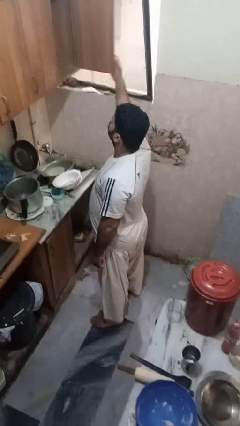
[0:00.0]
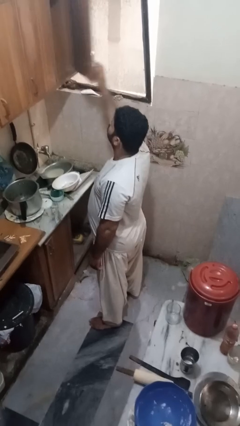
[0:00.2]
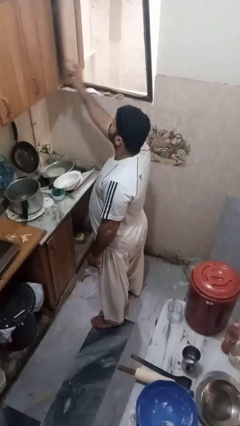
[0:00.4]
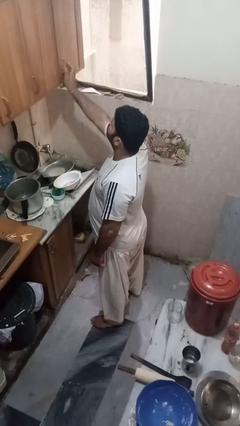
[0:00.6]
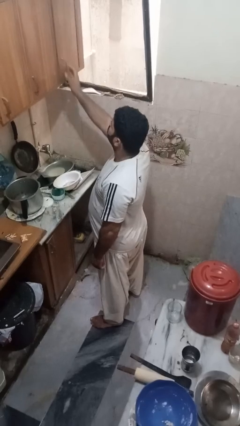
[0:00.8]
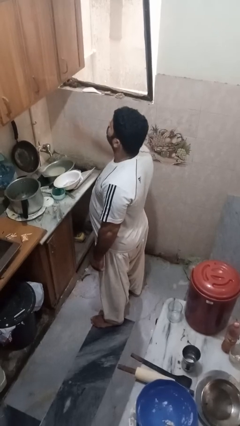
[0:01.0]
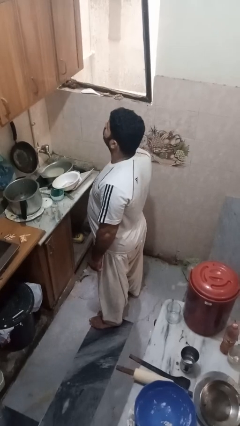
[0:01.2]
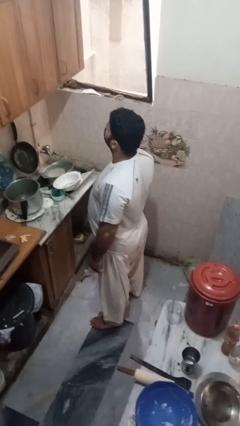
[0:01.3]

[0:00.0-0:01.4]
person closes cabinet

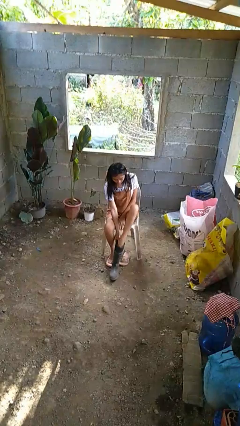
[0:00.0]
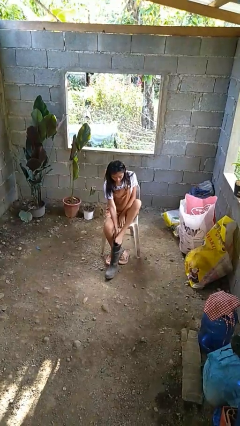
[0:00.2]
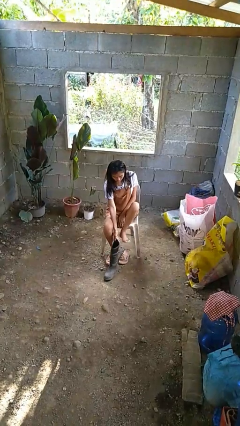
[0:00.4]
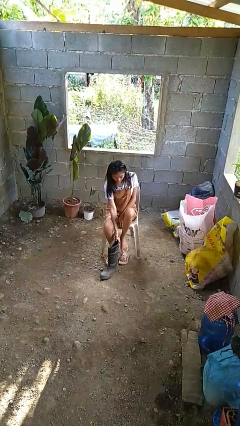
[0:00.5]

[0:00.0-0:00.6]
person takes off boots

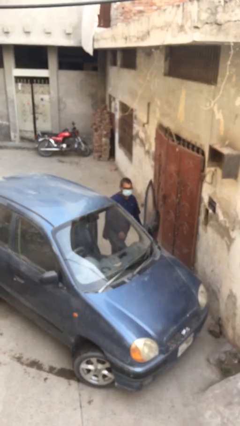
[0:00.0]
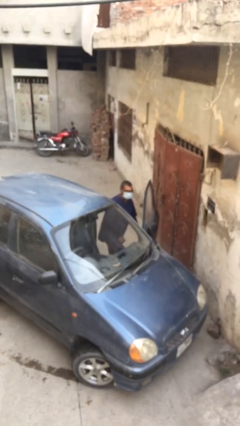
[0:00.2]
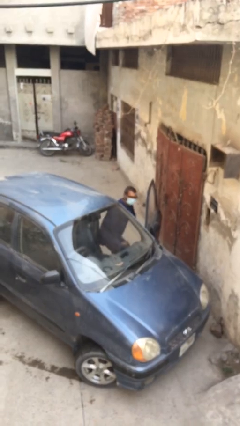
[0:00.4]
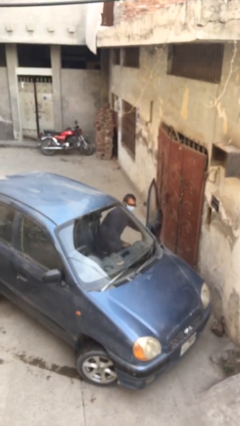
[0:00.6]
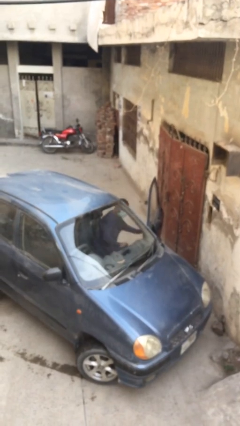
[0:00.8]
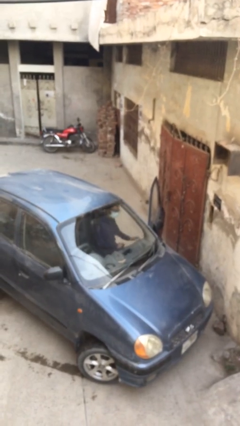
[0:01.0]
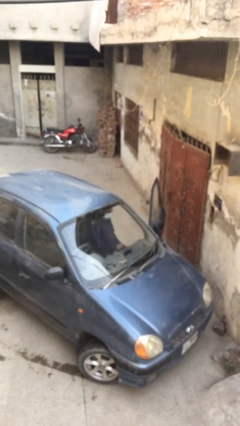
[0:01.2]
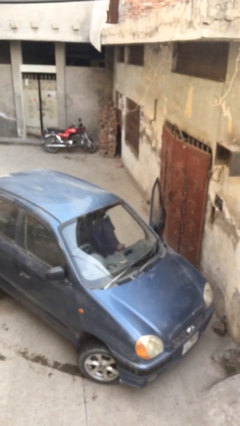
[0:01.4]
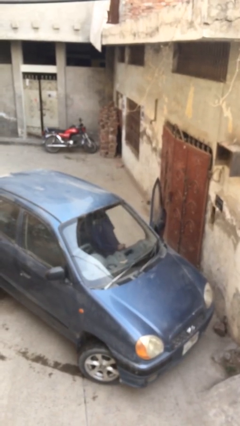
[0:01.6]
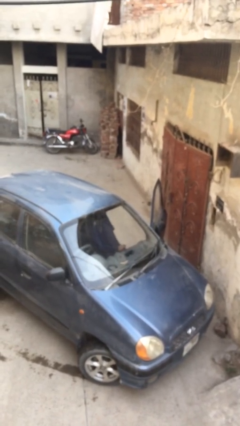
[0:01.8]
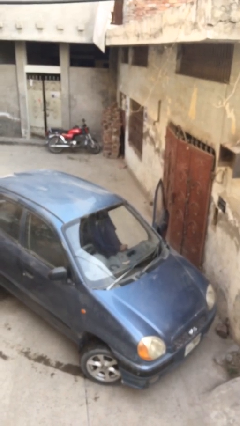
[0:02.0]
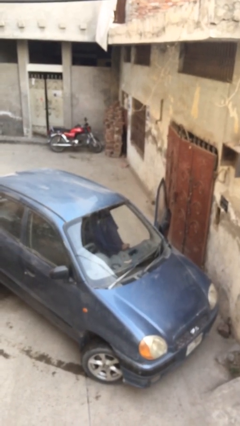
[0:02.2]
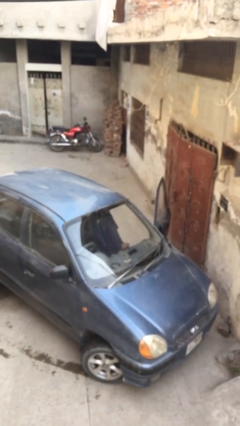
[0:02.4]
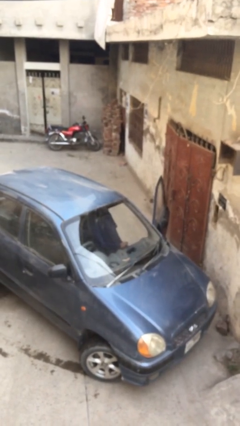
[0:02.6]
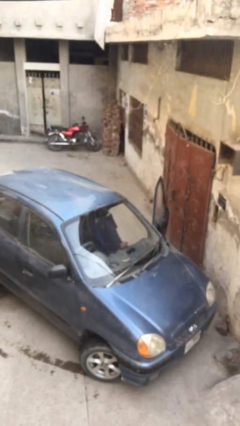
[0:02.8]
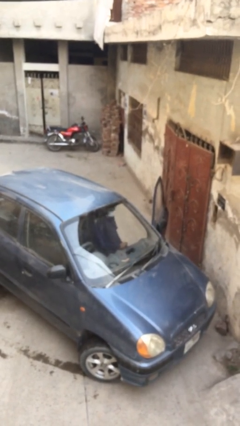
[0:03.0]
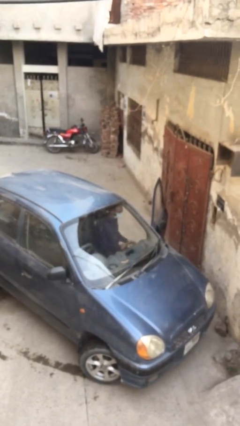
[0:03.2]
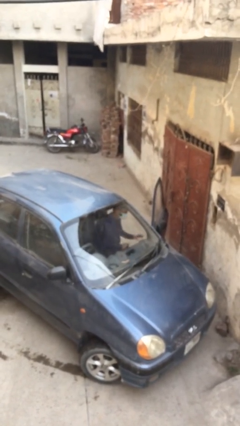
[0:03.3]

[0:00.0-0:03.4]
person enters car

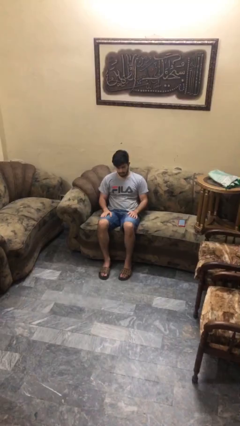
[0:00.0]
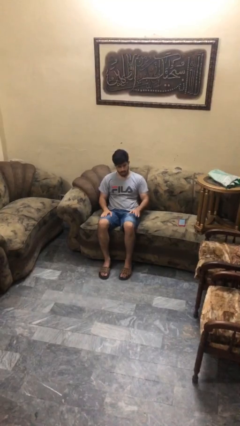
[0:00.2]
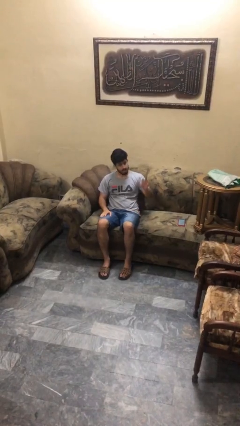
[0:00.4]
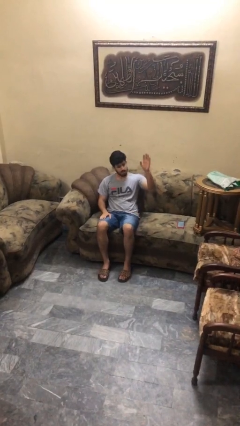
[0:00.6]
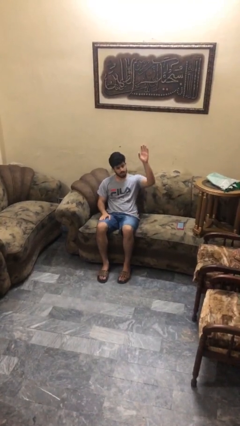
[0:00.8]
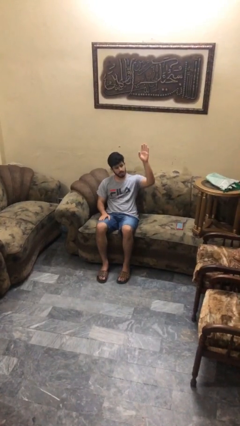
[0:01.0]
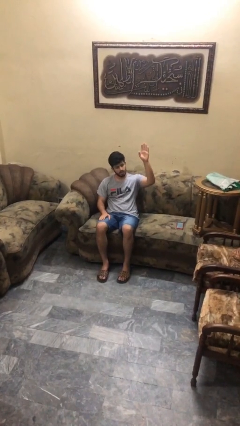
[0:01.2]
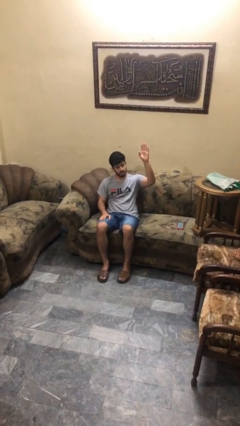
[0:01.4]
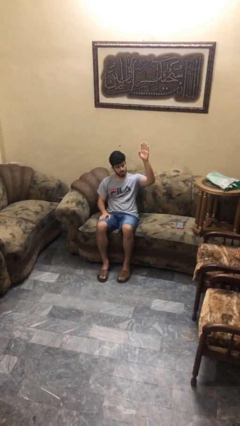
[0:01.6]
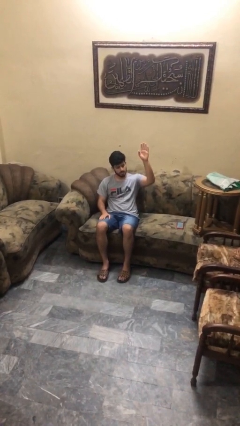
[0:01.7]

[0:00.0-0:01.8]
person gestures raise hand

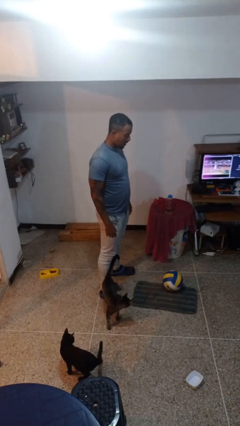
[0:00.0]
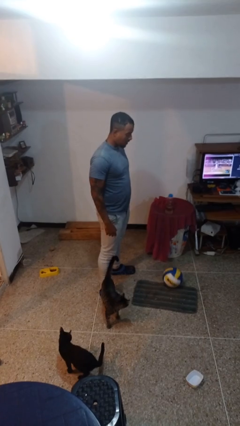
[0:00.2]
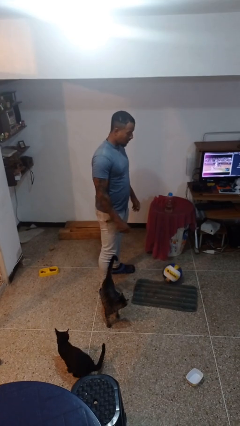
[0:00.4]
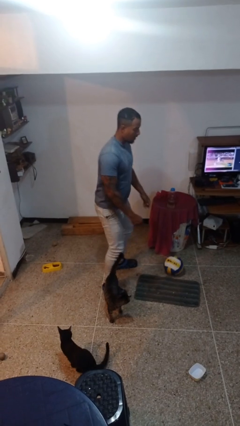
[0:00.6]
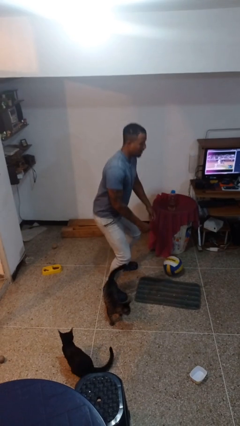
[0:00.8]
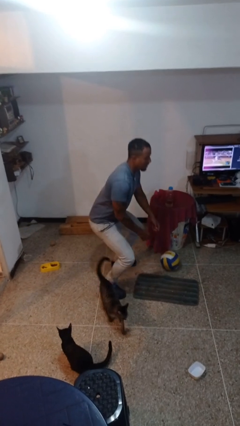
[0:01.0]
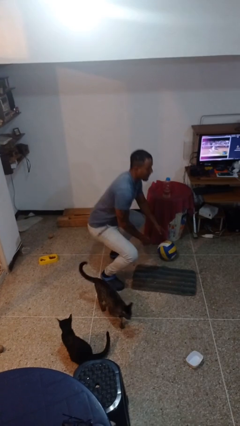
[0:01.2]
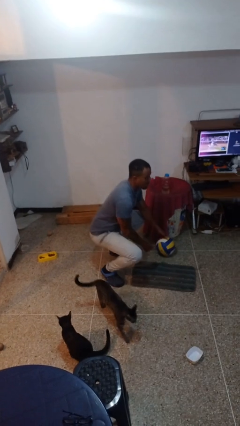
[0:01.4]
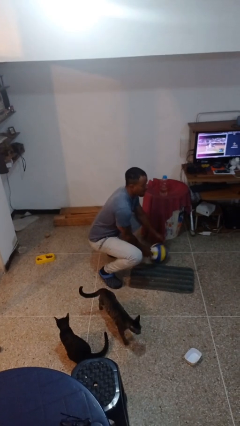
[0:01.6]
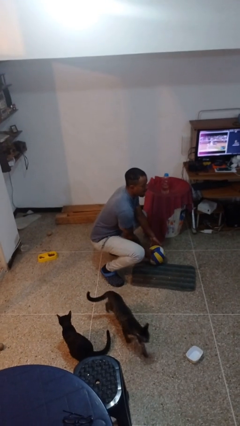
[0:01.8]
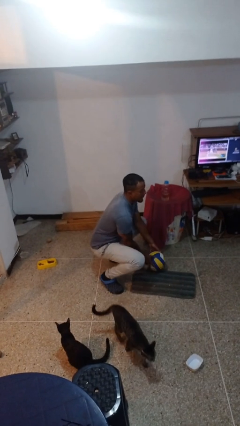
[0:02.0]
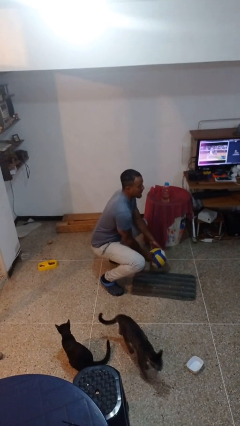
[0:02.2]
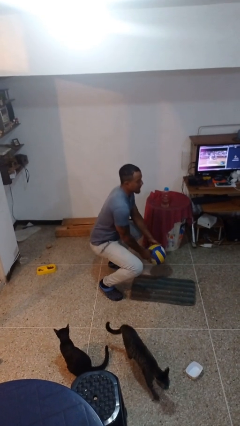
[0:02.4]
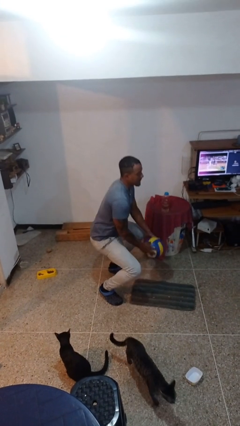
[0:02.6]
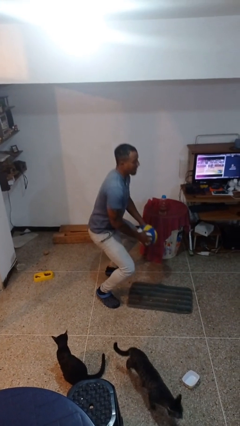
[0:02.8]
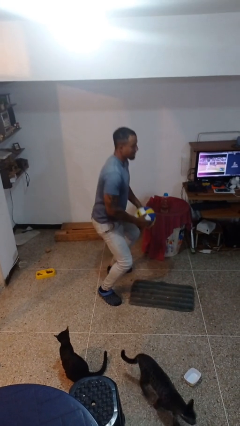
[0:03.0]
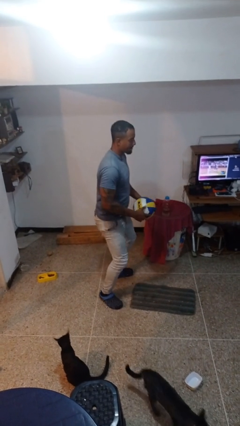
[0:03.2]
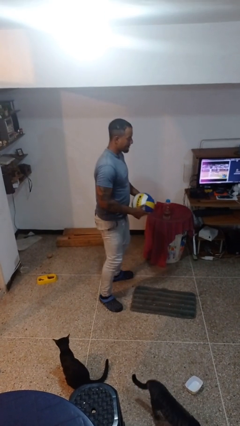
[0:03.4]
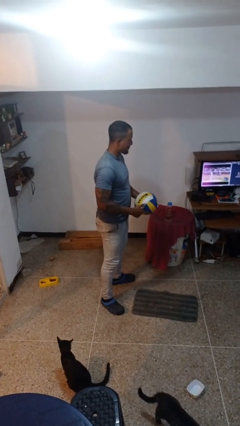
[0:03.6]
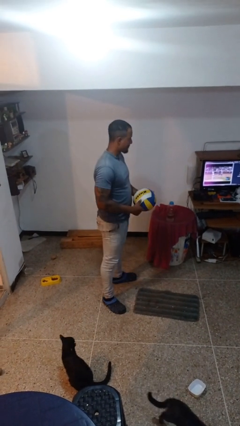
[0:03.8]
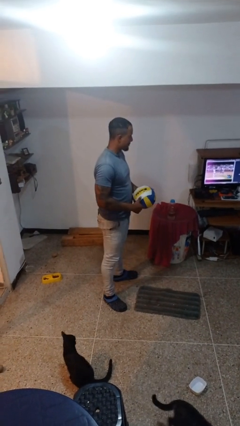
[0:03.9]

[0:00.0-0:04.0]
person picks up object from floor

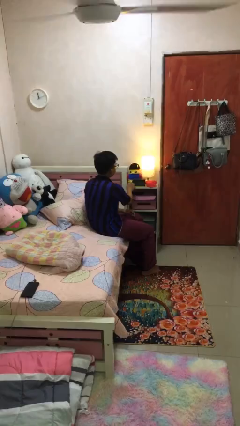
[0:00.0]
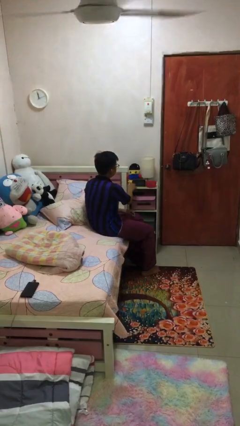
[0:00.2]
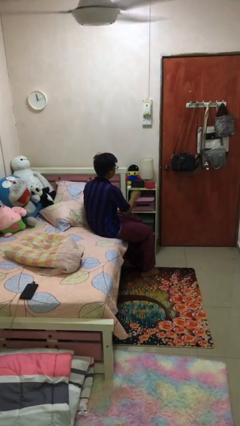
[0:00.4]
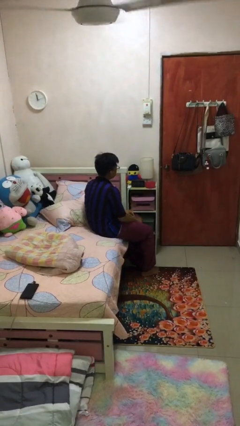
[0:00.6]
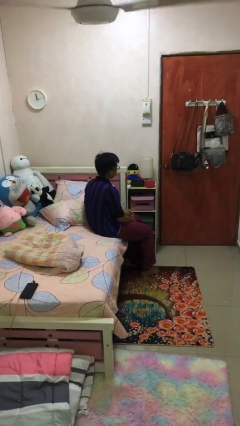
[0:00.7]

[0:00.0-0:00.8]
person turns off lamp

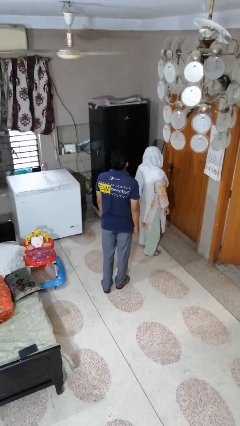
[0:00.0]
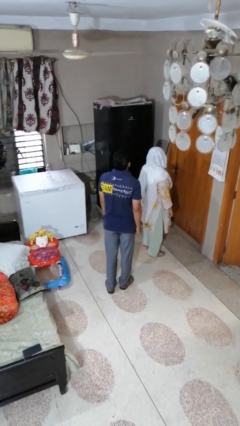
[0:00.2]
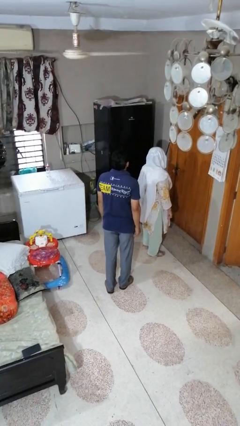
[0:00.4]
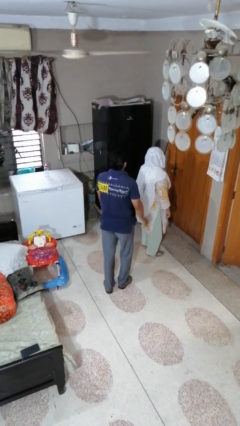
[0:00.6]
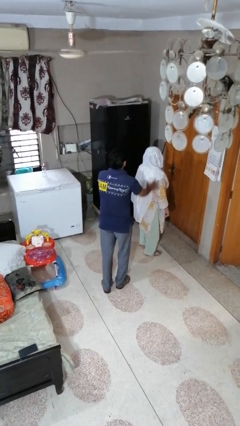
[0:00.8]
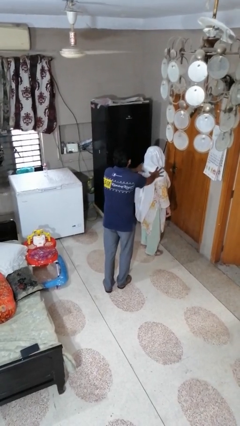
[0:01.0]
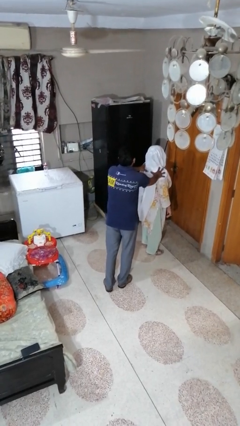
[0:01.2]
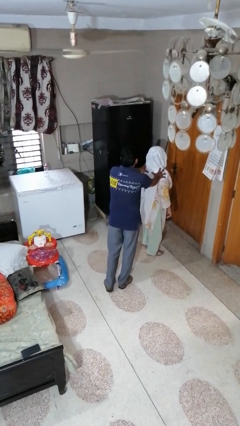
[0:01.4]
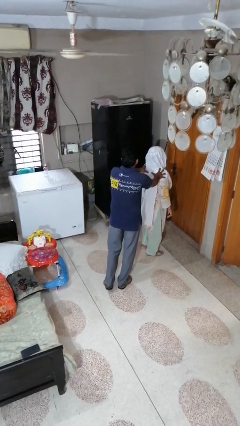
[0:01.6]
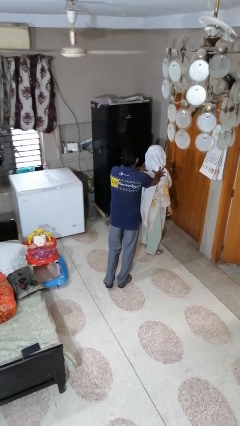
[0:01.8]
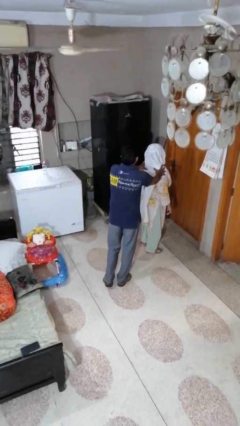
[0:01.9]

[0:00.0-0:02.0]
person grabs person by shoulder

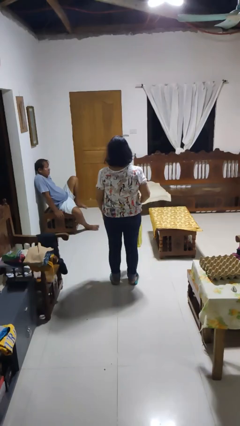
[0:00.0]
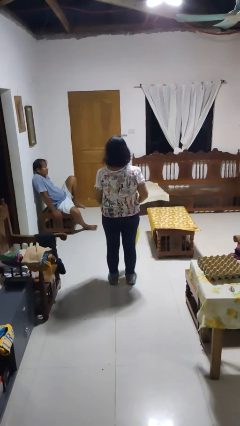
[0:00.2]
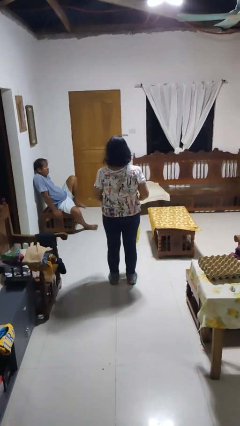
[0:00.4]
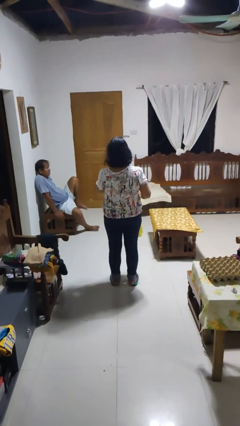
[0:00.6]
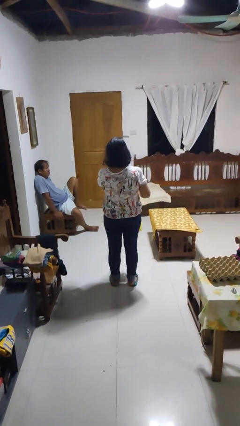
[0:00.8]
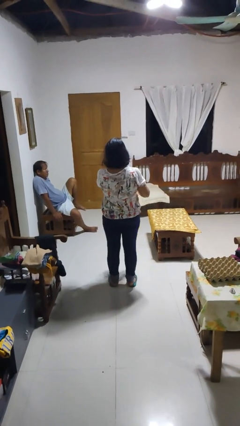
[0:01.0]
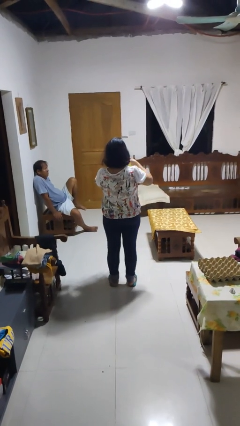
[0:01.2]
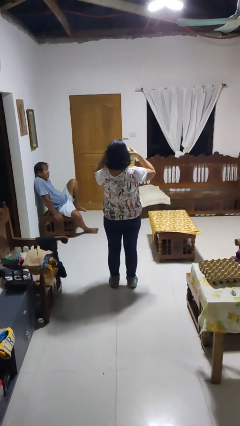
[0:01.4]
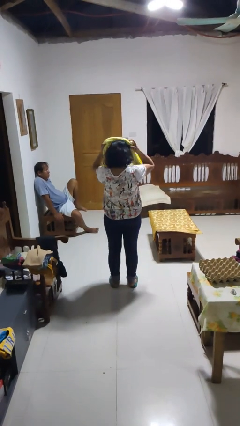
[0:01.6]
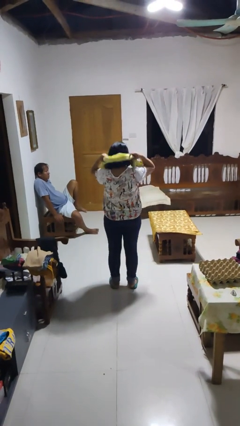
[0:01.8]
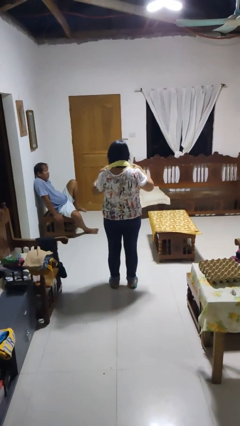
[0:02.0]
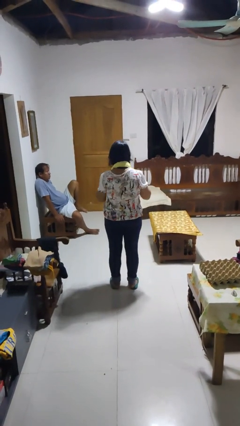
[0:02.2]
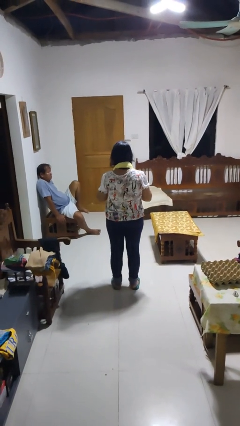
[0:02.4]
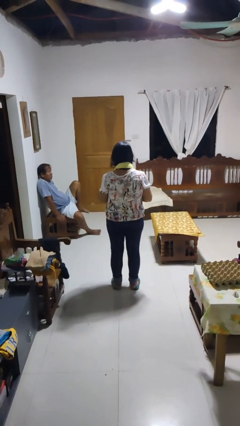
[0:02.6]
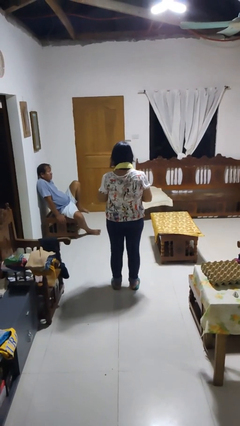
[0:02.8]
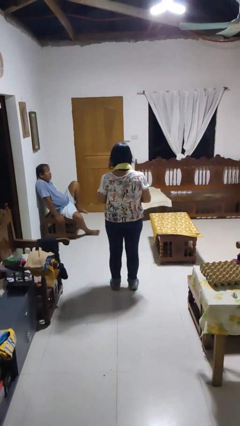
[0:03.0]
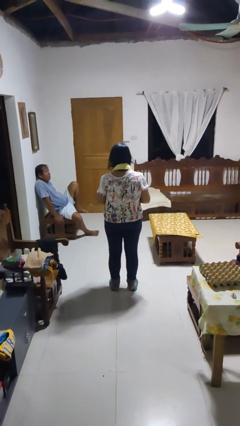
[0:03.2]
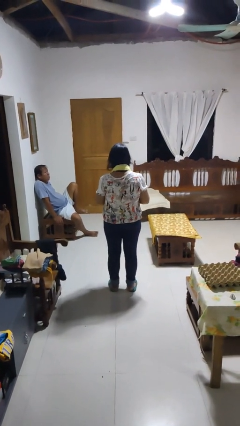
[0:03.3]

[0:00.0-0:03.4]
person puts on scarf
